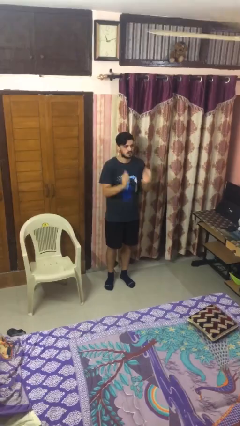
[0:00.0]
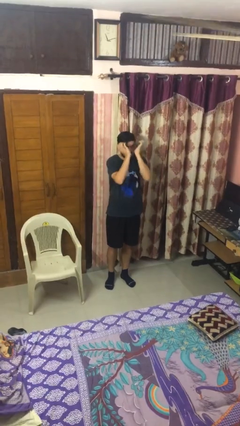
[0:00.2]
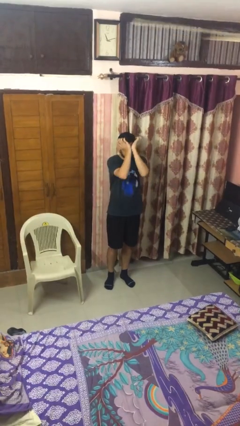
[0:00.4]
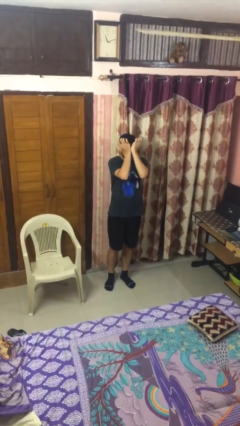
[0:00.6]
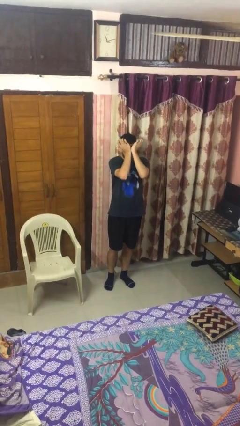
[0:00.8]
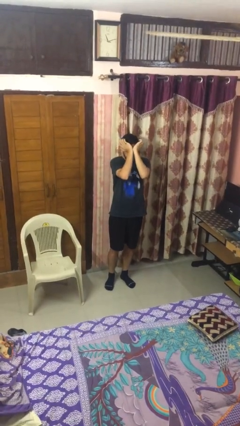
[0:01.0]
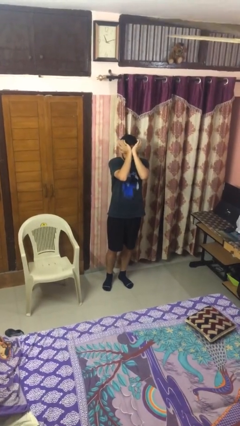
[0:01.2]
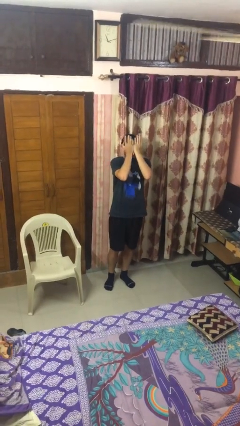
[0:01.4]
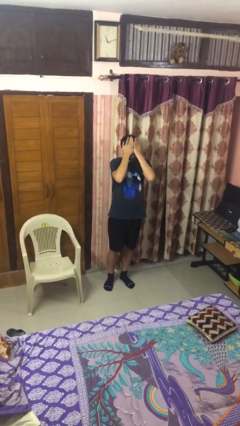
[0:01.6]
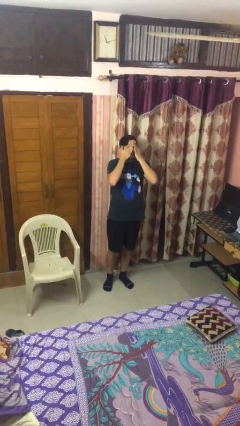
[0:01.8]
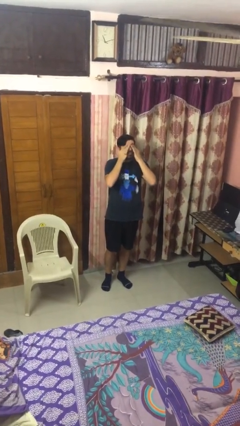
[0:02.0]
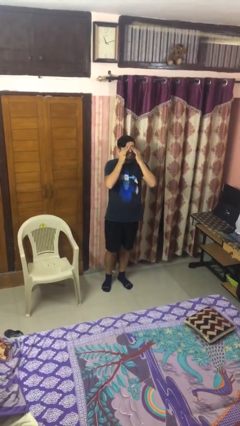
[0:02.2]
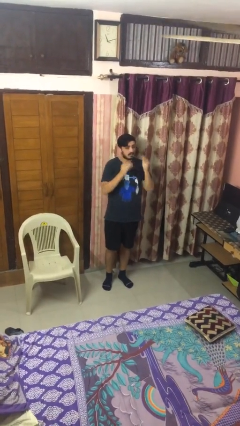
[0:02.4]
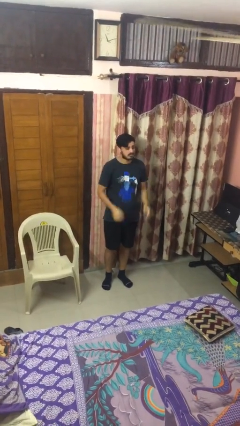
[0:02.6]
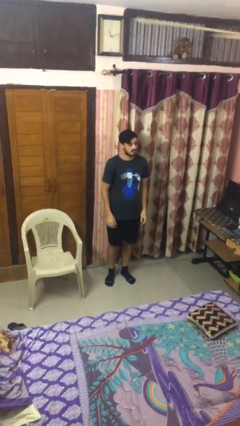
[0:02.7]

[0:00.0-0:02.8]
person rubs eyes

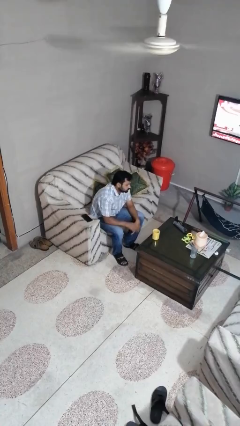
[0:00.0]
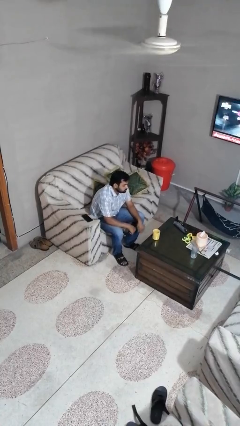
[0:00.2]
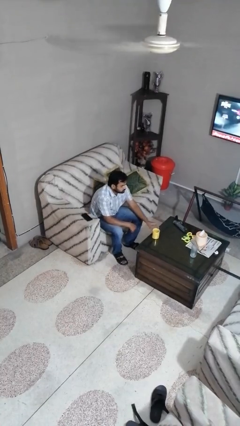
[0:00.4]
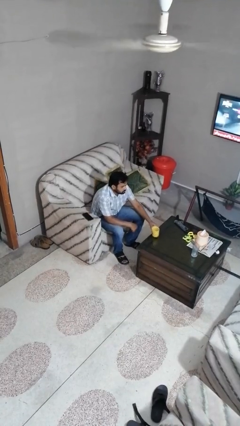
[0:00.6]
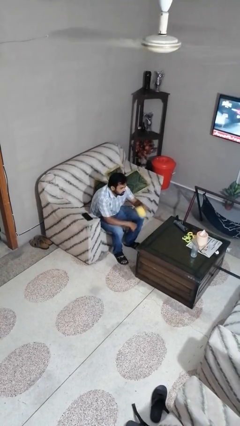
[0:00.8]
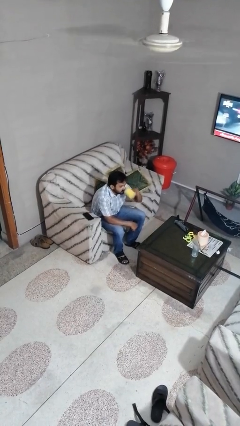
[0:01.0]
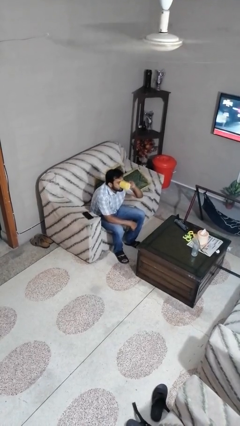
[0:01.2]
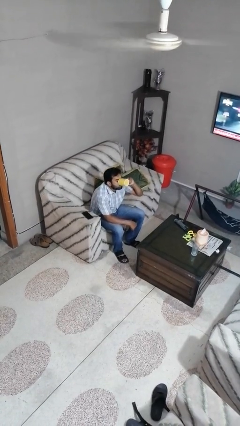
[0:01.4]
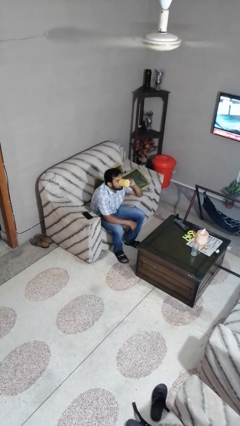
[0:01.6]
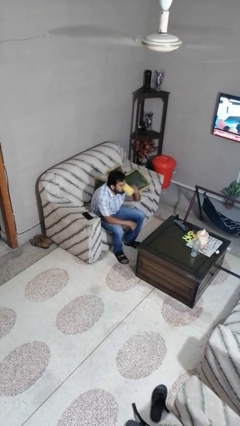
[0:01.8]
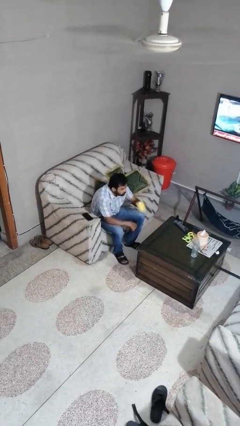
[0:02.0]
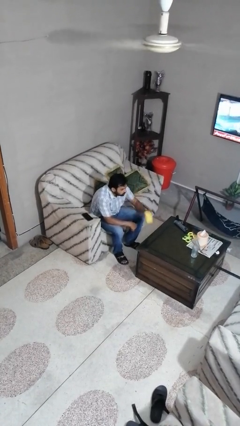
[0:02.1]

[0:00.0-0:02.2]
person drinks from mug

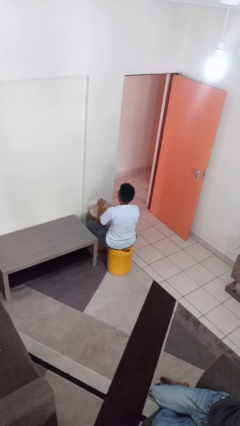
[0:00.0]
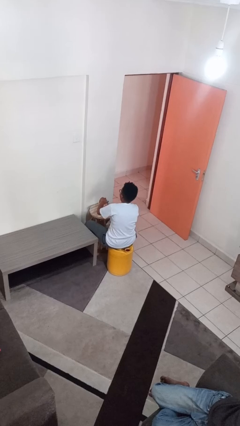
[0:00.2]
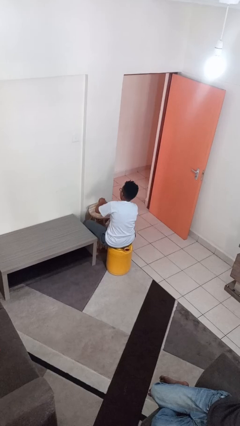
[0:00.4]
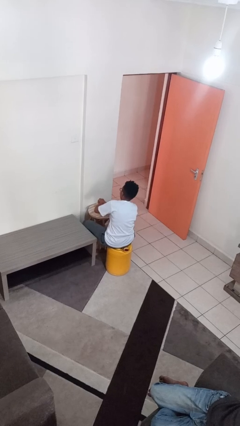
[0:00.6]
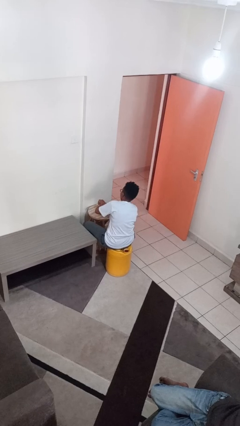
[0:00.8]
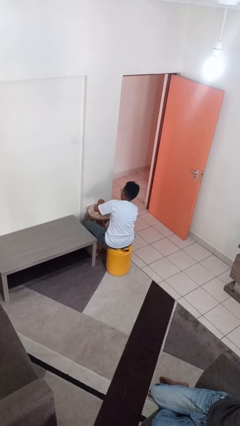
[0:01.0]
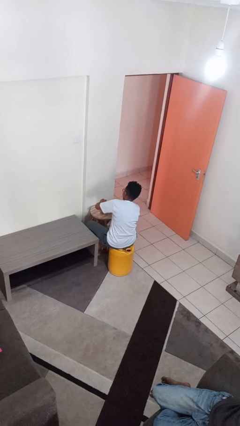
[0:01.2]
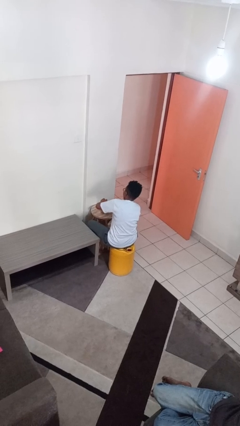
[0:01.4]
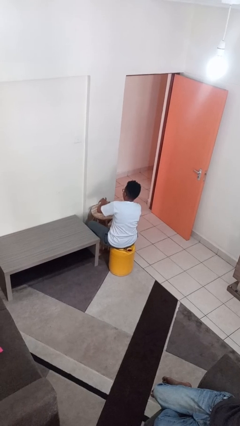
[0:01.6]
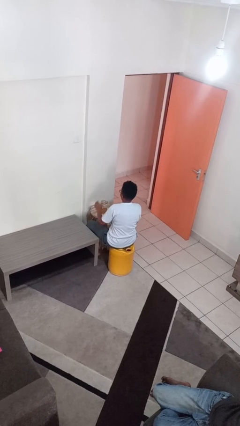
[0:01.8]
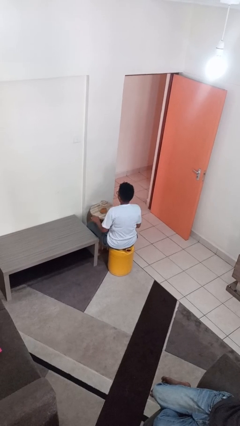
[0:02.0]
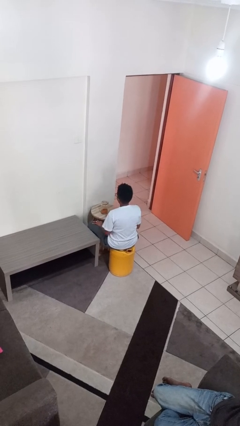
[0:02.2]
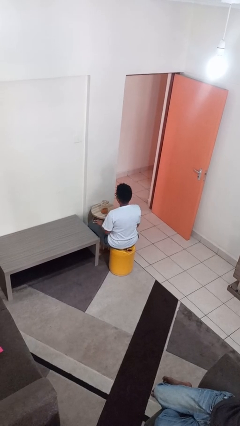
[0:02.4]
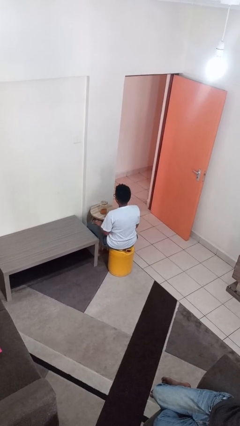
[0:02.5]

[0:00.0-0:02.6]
person closes jar

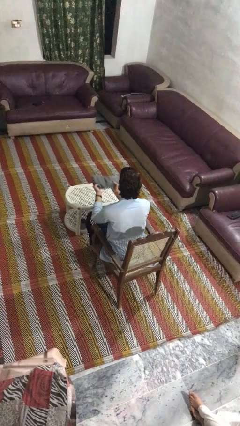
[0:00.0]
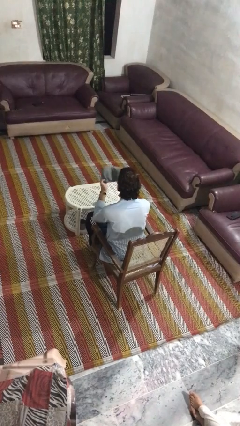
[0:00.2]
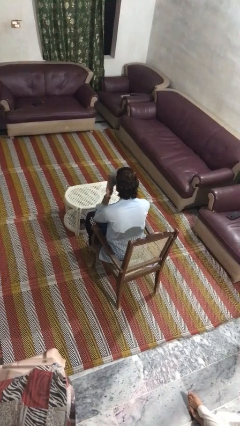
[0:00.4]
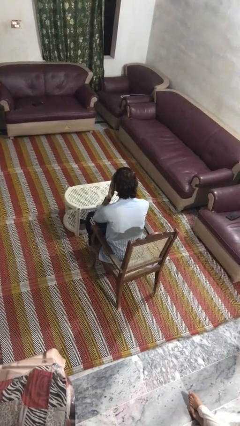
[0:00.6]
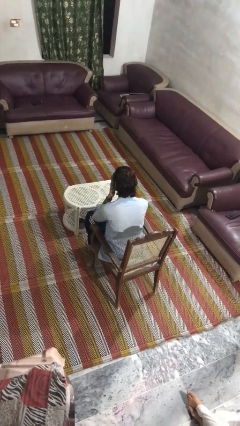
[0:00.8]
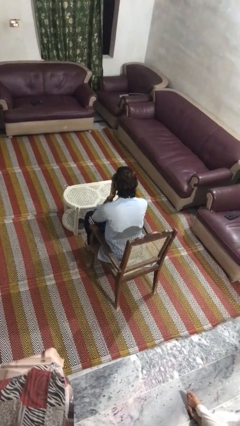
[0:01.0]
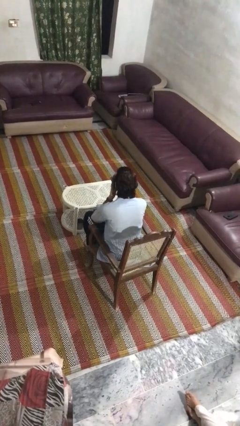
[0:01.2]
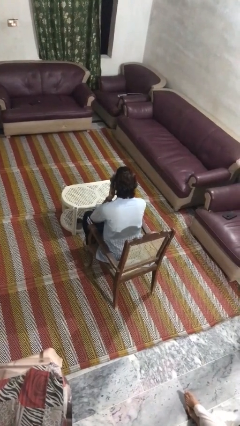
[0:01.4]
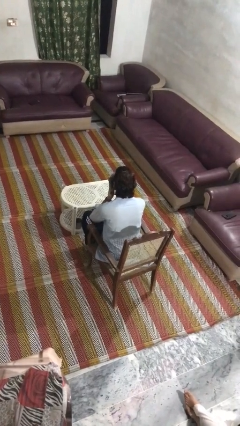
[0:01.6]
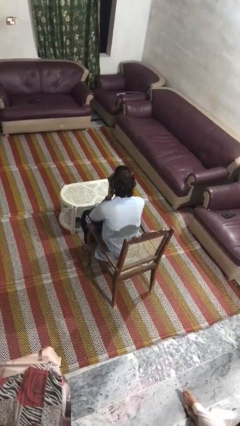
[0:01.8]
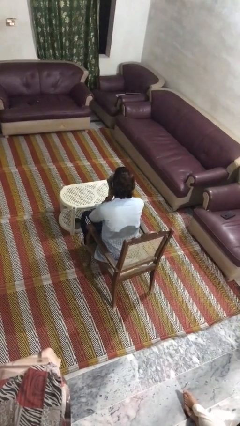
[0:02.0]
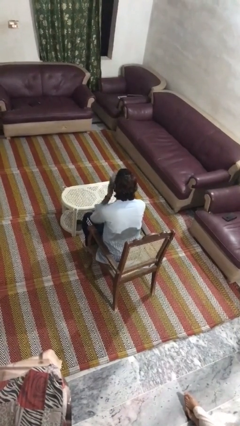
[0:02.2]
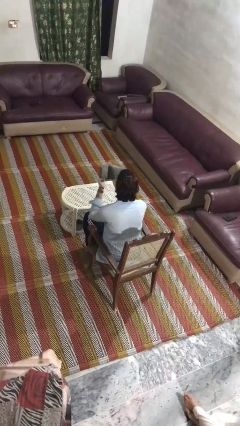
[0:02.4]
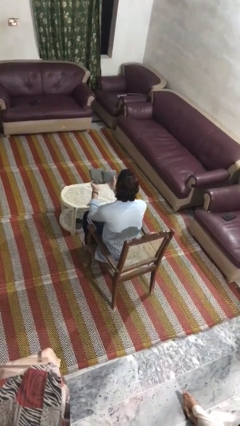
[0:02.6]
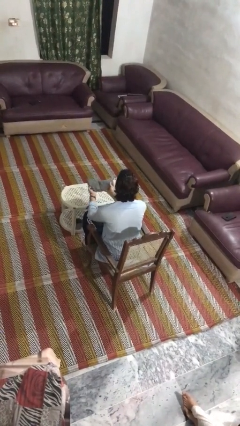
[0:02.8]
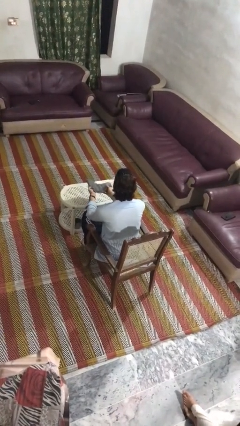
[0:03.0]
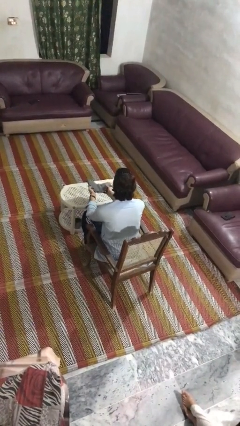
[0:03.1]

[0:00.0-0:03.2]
person wipes mouth with napkin

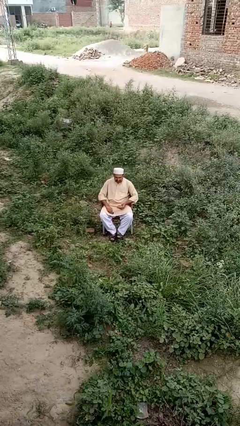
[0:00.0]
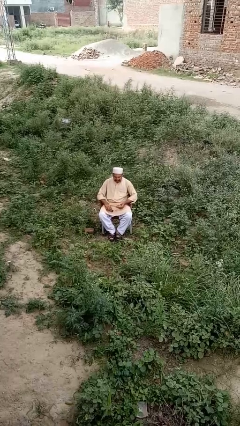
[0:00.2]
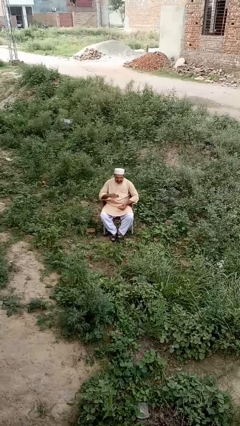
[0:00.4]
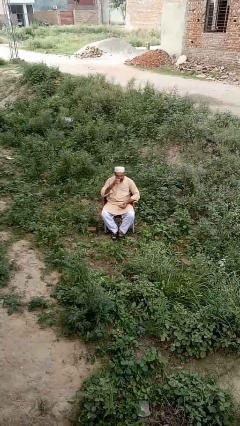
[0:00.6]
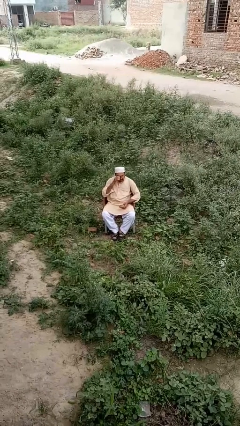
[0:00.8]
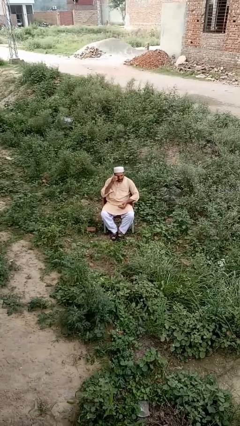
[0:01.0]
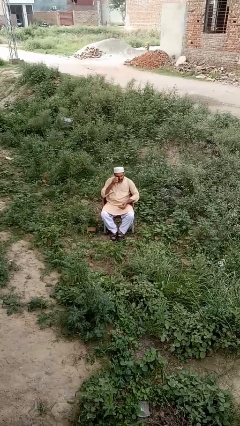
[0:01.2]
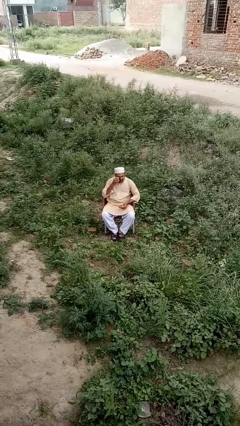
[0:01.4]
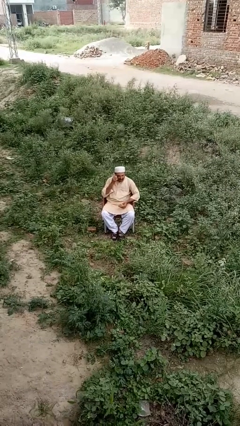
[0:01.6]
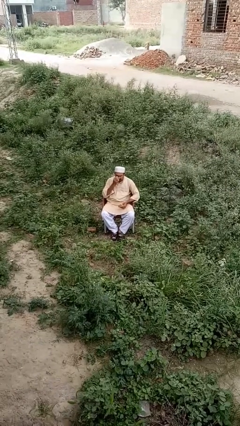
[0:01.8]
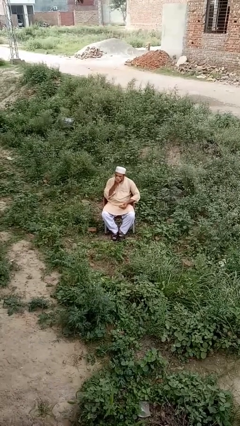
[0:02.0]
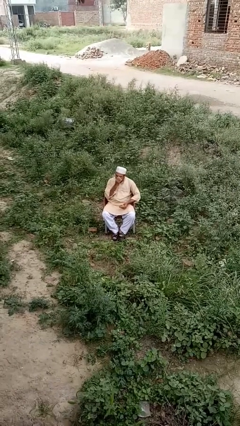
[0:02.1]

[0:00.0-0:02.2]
person shades eyes

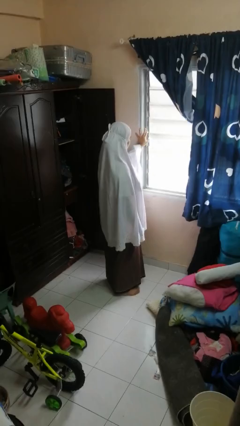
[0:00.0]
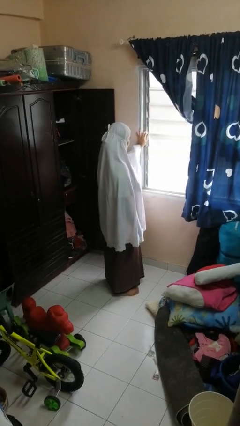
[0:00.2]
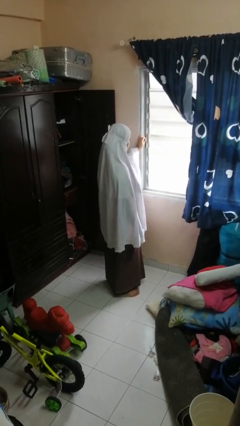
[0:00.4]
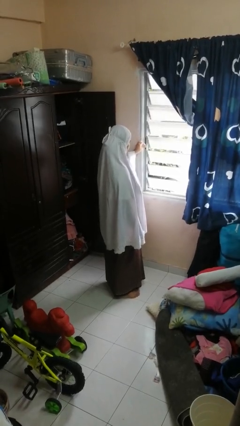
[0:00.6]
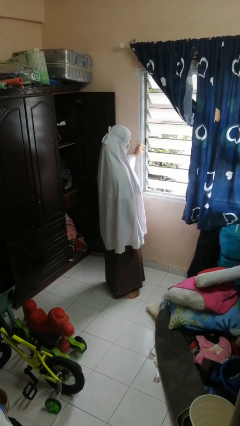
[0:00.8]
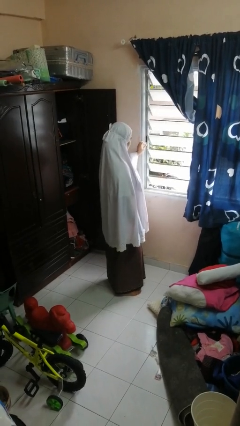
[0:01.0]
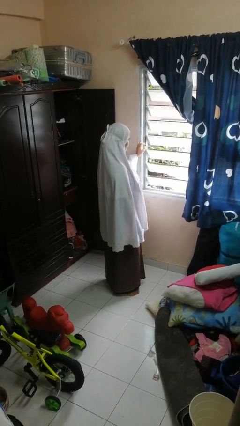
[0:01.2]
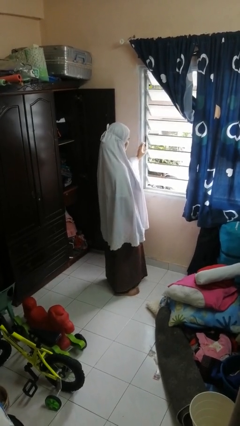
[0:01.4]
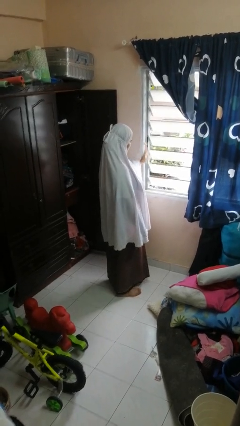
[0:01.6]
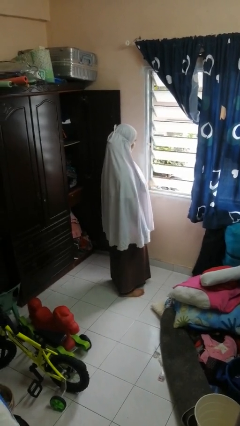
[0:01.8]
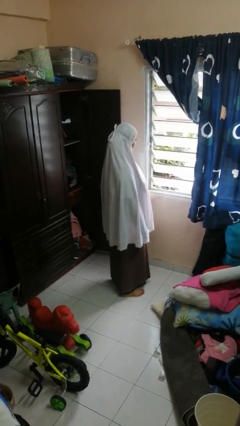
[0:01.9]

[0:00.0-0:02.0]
person opens home window

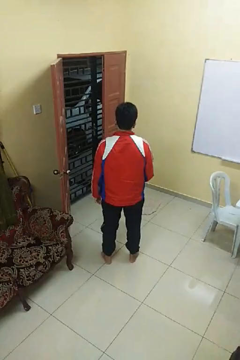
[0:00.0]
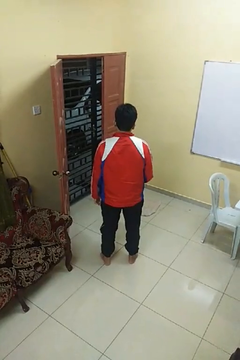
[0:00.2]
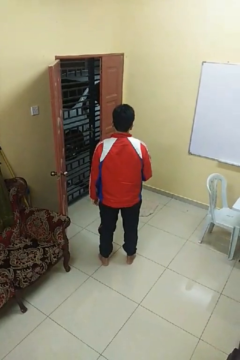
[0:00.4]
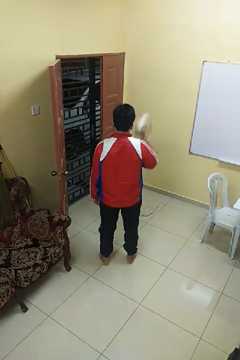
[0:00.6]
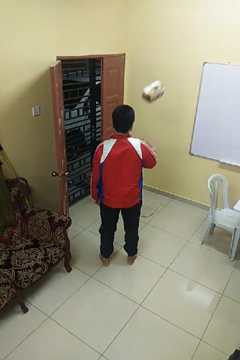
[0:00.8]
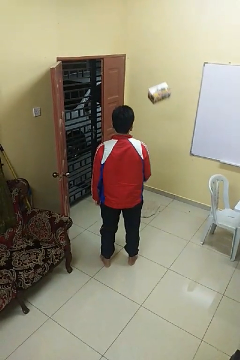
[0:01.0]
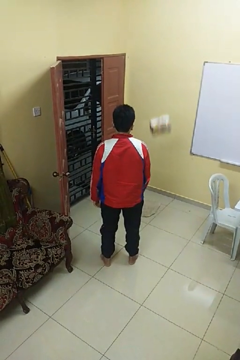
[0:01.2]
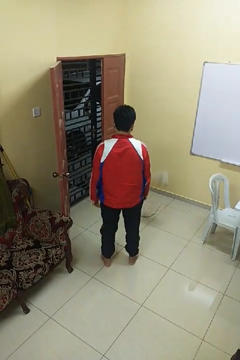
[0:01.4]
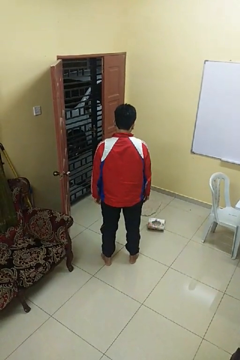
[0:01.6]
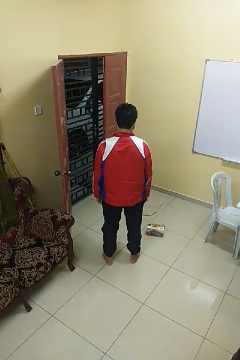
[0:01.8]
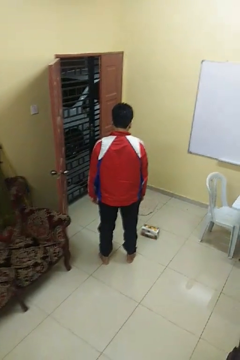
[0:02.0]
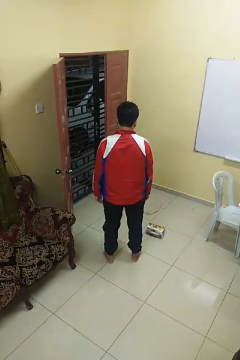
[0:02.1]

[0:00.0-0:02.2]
person throws object into air
